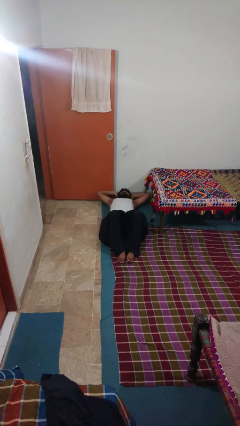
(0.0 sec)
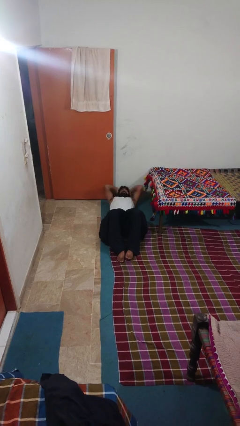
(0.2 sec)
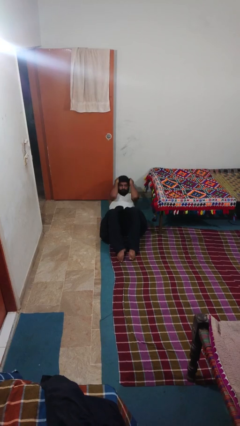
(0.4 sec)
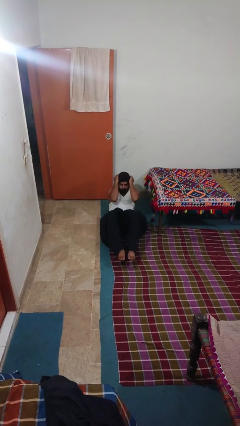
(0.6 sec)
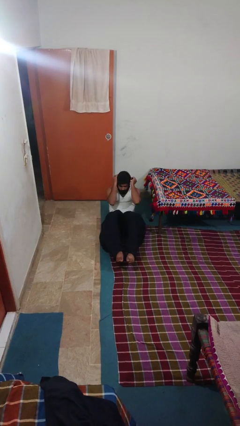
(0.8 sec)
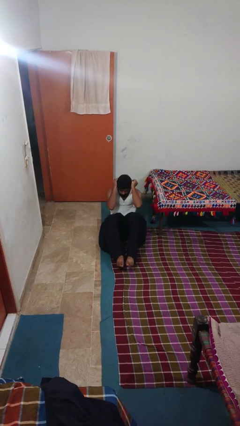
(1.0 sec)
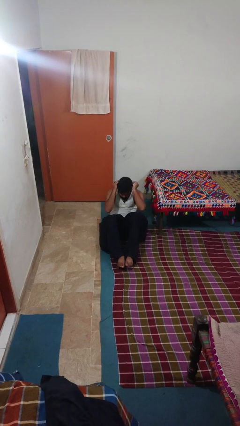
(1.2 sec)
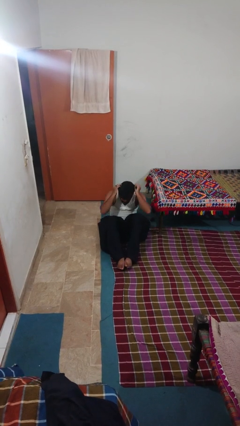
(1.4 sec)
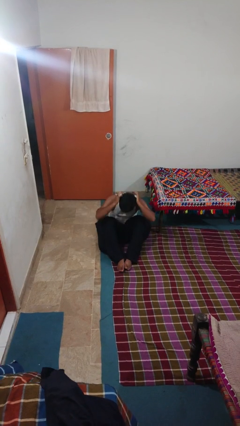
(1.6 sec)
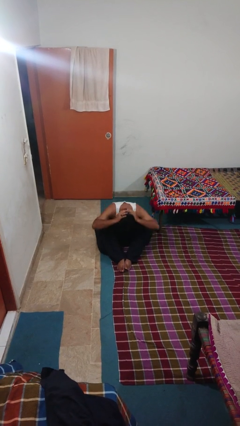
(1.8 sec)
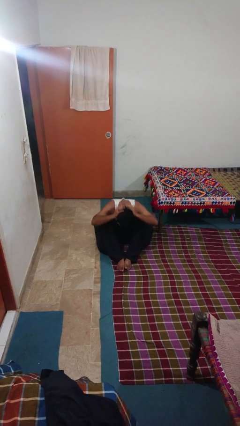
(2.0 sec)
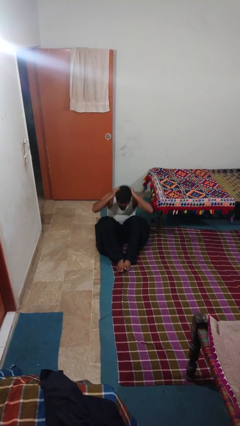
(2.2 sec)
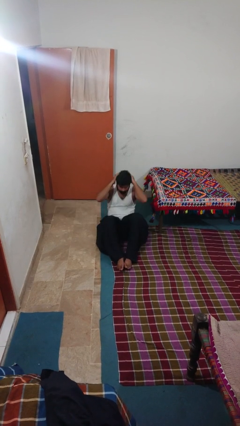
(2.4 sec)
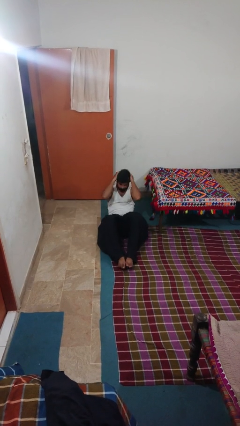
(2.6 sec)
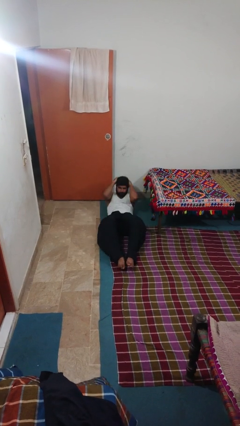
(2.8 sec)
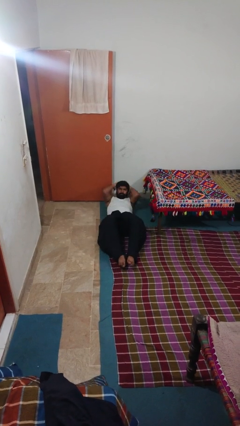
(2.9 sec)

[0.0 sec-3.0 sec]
person exercises with situp

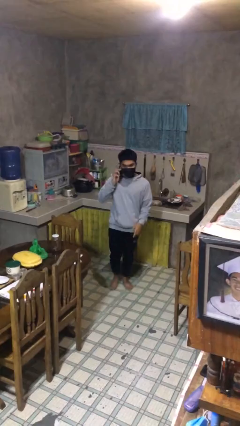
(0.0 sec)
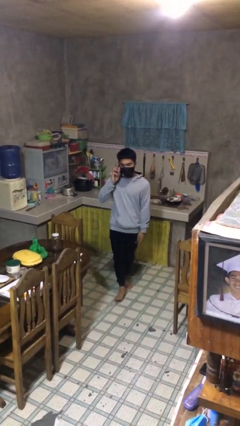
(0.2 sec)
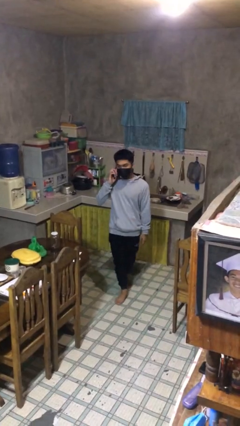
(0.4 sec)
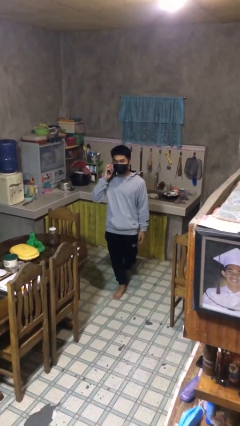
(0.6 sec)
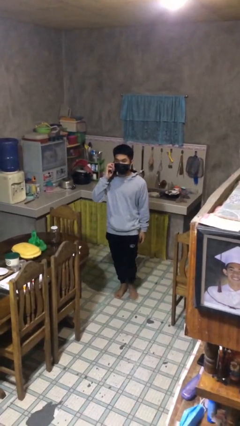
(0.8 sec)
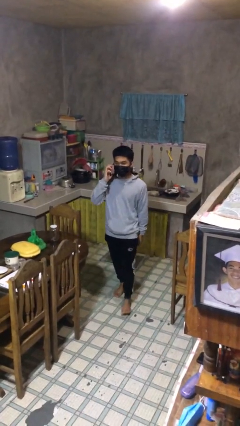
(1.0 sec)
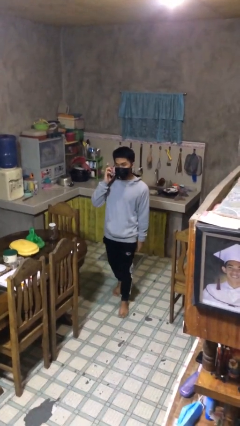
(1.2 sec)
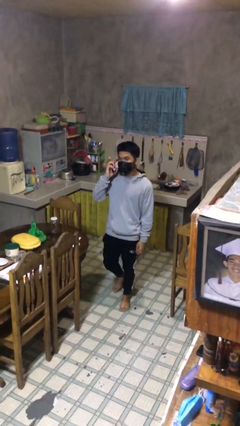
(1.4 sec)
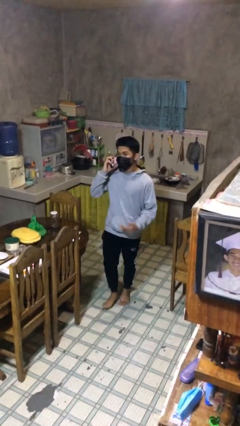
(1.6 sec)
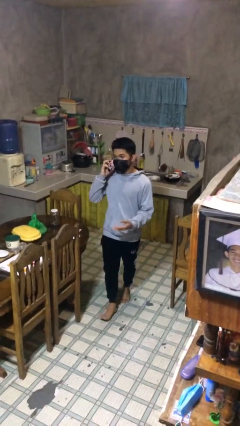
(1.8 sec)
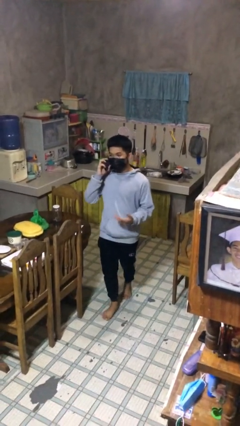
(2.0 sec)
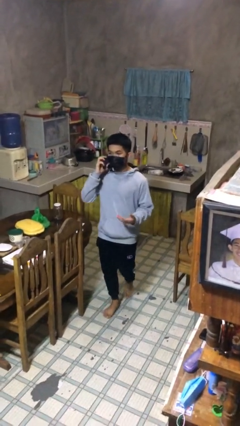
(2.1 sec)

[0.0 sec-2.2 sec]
person talks on phone

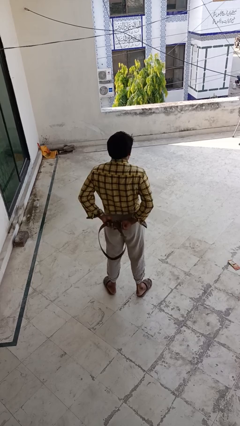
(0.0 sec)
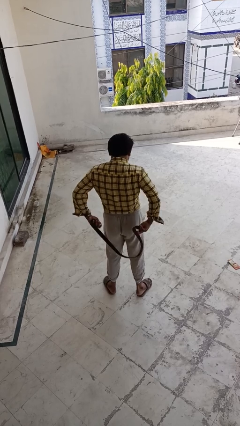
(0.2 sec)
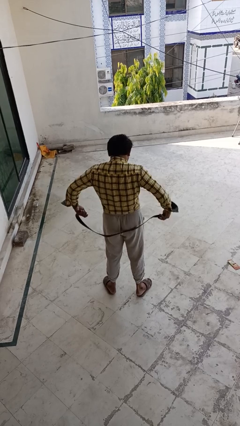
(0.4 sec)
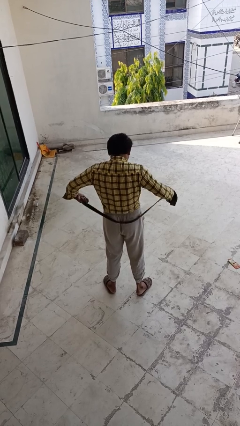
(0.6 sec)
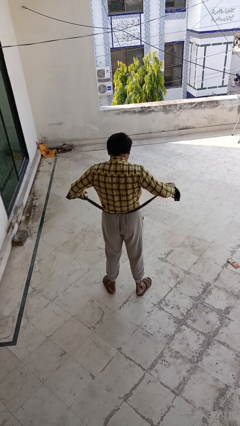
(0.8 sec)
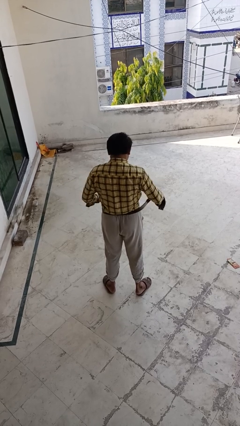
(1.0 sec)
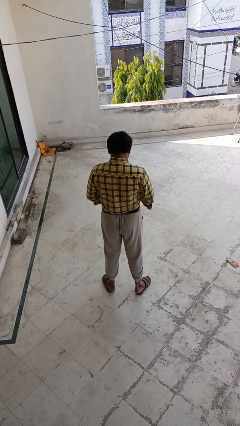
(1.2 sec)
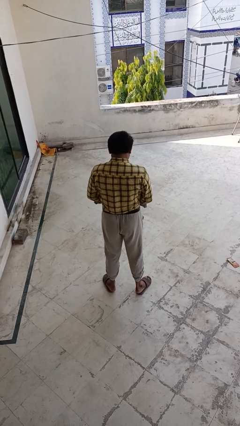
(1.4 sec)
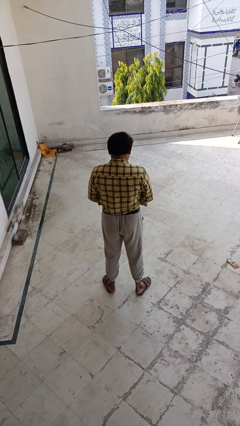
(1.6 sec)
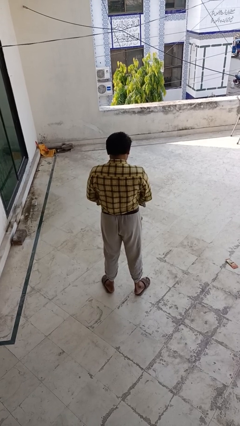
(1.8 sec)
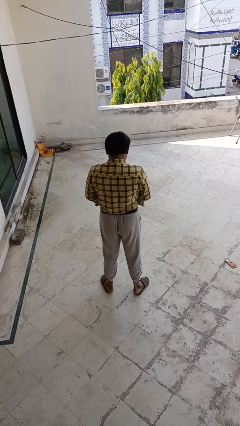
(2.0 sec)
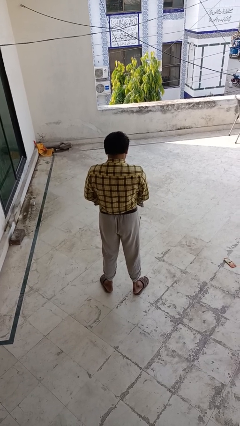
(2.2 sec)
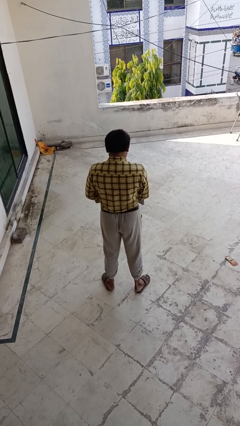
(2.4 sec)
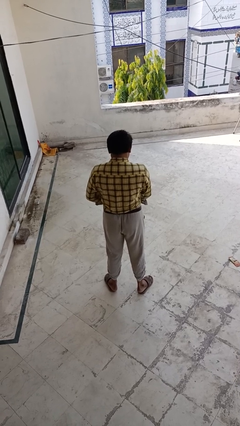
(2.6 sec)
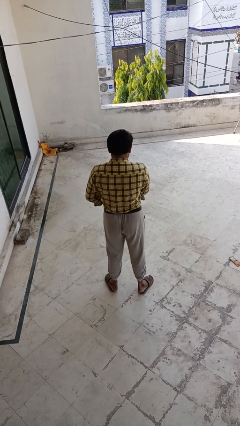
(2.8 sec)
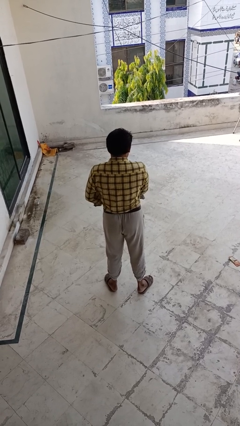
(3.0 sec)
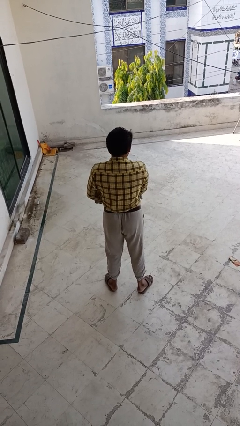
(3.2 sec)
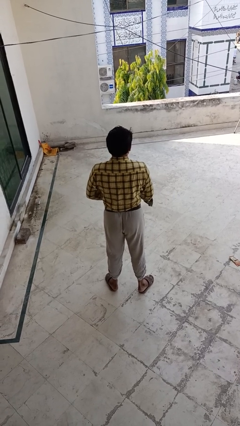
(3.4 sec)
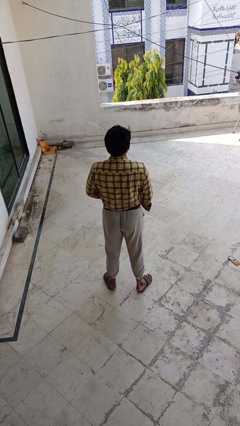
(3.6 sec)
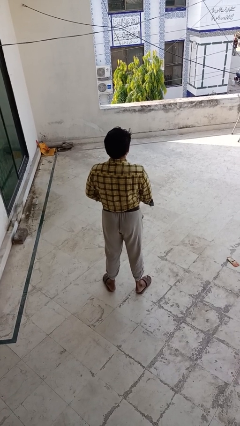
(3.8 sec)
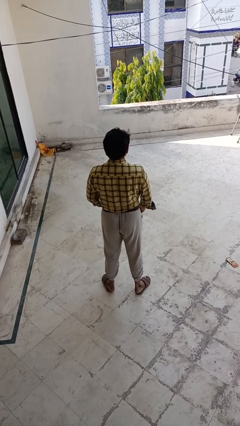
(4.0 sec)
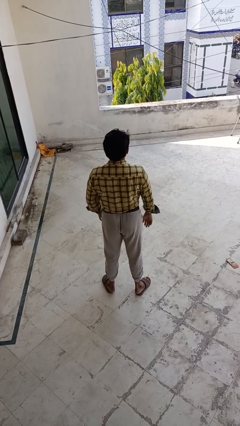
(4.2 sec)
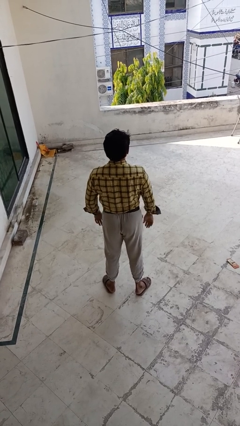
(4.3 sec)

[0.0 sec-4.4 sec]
person puts on belt

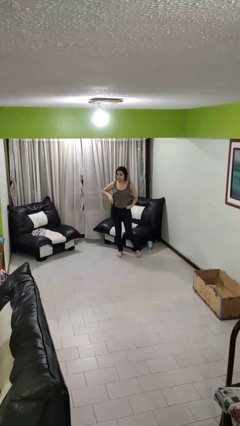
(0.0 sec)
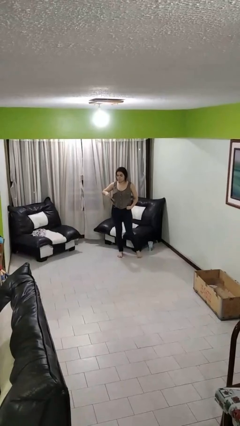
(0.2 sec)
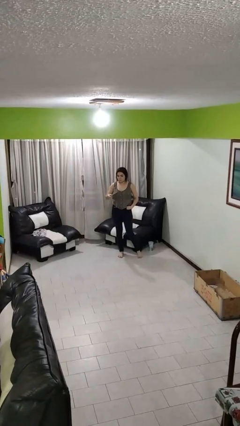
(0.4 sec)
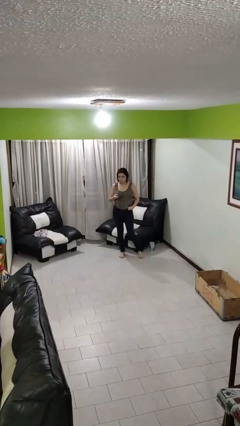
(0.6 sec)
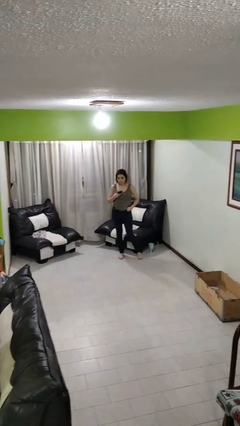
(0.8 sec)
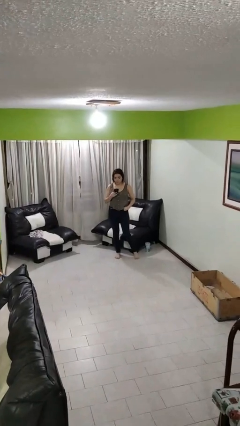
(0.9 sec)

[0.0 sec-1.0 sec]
person takes phone from pocket

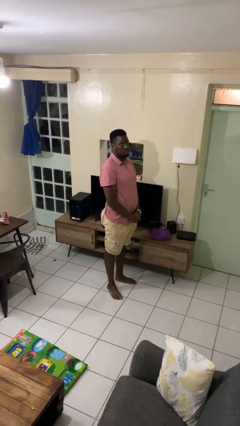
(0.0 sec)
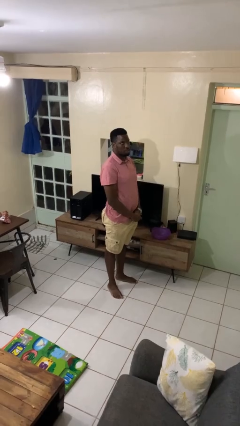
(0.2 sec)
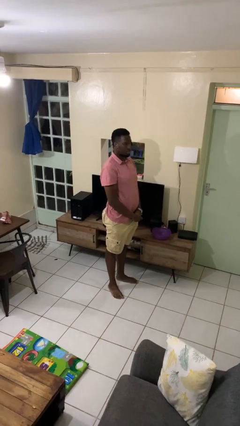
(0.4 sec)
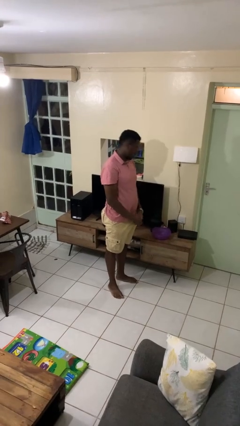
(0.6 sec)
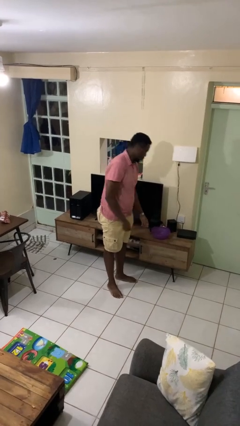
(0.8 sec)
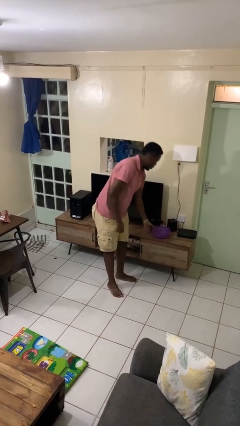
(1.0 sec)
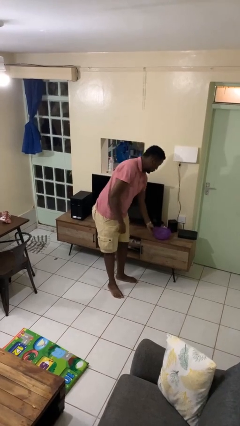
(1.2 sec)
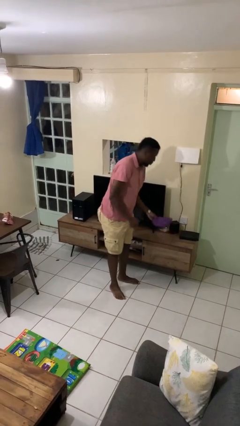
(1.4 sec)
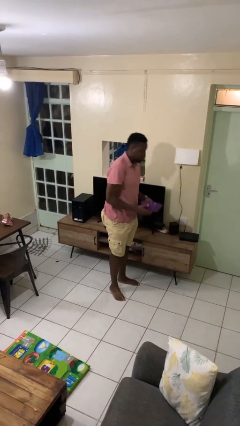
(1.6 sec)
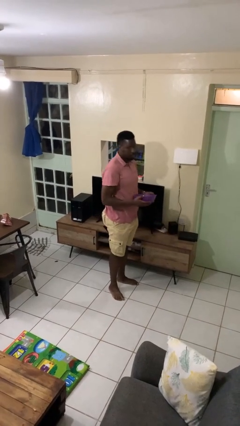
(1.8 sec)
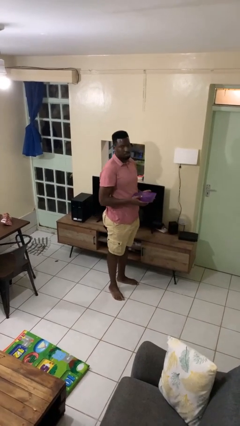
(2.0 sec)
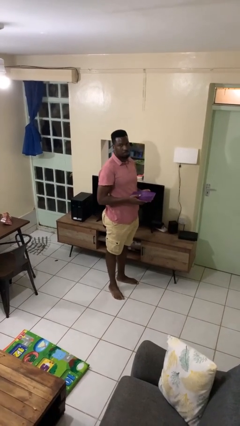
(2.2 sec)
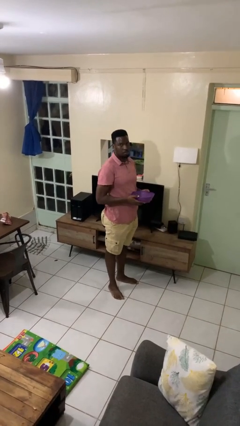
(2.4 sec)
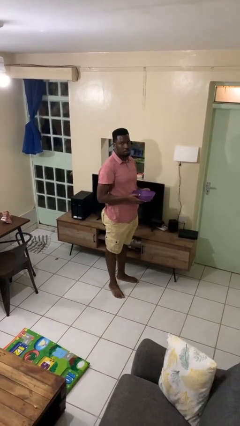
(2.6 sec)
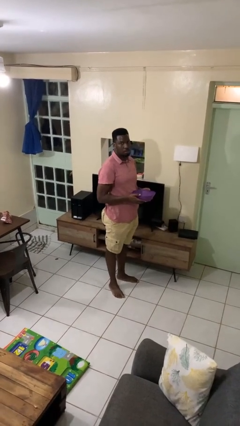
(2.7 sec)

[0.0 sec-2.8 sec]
person picks up object from countertop

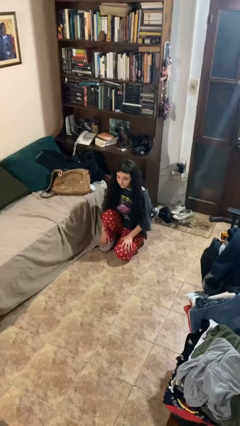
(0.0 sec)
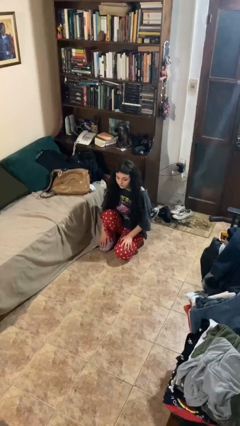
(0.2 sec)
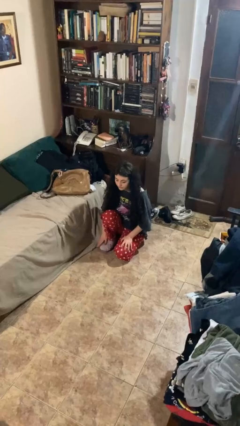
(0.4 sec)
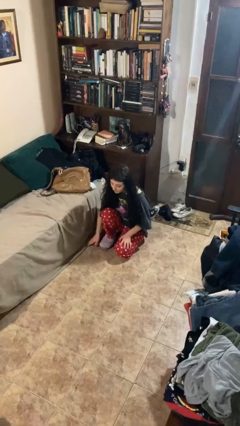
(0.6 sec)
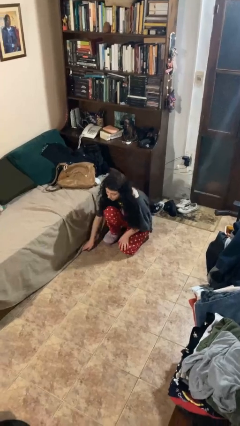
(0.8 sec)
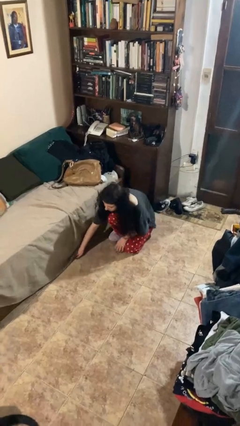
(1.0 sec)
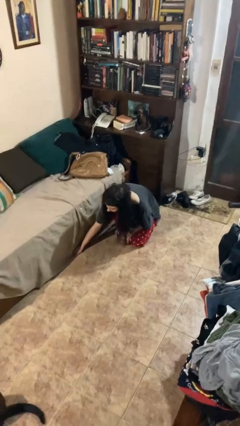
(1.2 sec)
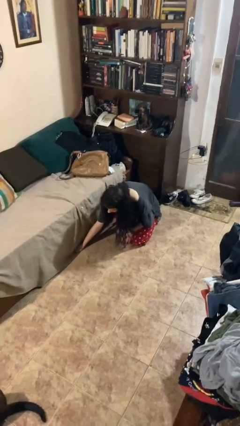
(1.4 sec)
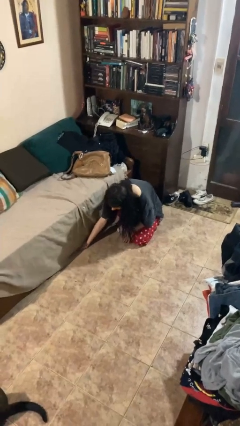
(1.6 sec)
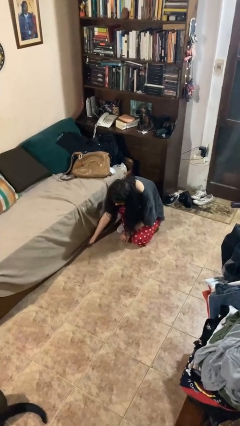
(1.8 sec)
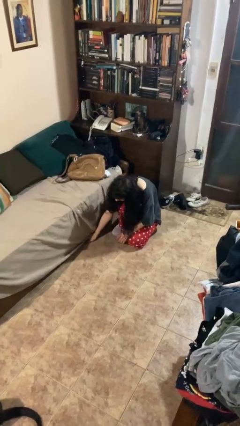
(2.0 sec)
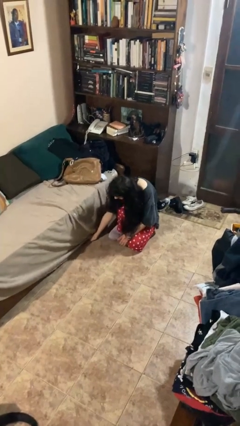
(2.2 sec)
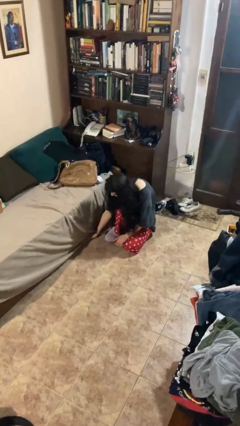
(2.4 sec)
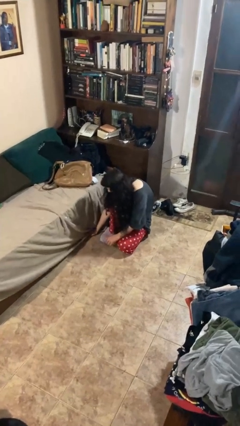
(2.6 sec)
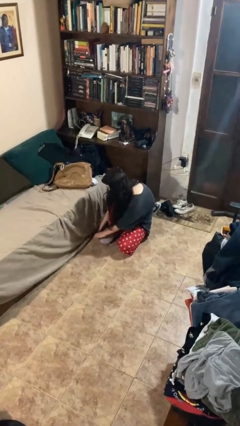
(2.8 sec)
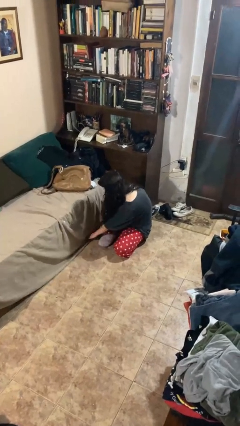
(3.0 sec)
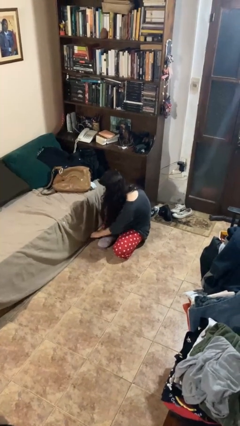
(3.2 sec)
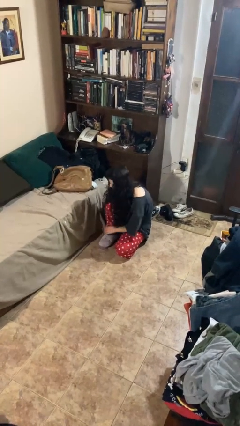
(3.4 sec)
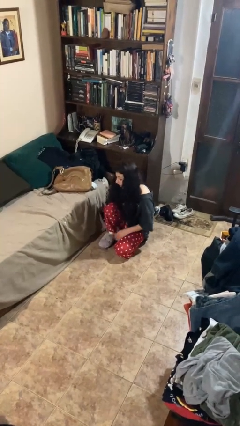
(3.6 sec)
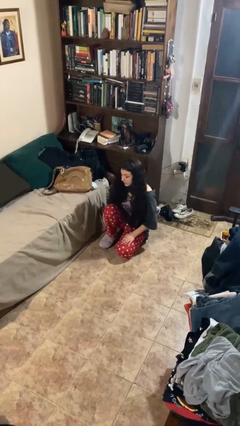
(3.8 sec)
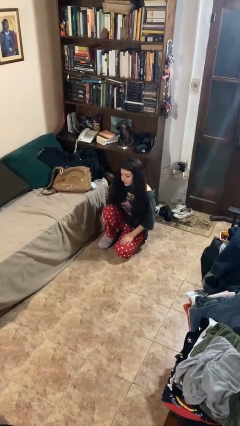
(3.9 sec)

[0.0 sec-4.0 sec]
person searches under couch

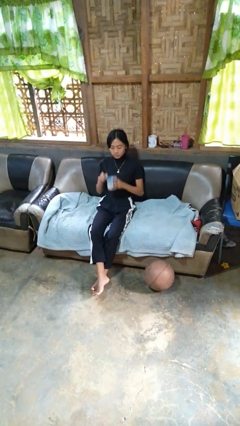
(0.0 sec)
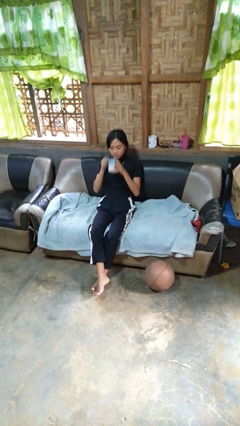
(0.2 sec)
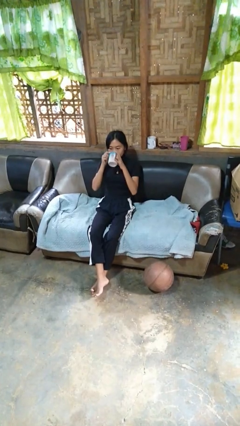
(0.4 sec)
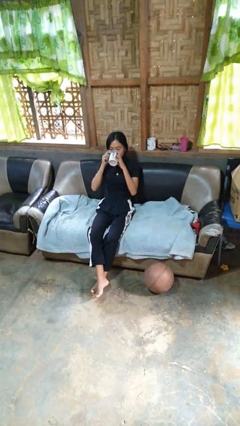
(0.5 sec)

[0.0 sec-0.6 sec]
person drinks from mug
